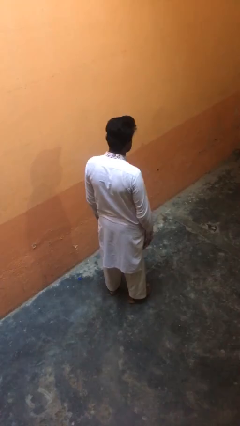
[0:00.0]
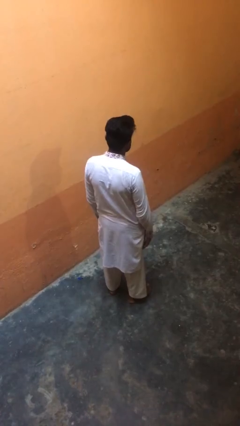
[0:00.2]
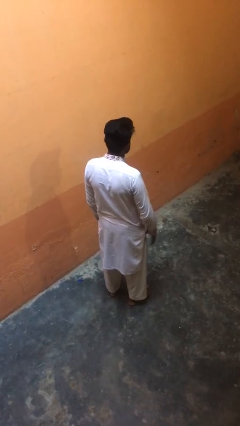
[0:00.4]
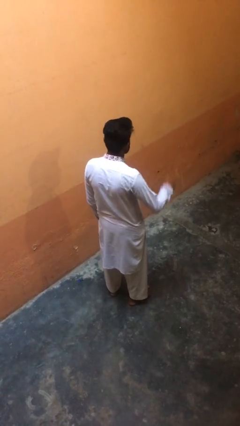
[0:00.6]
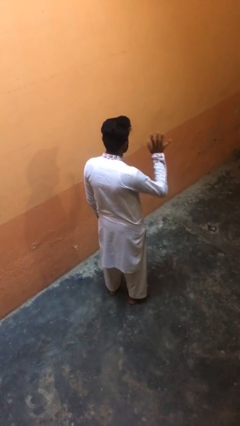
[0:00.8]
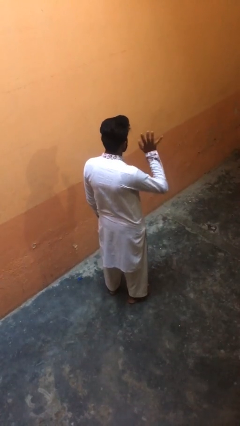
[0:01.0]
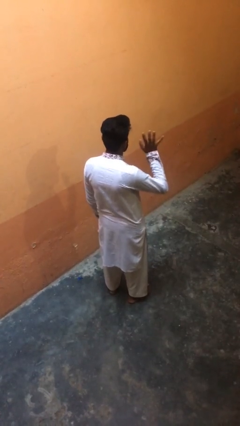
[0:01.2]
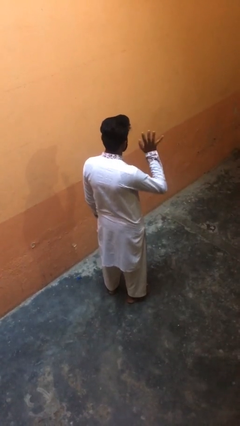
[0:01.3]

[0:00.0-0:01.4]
person gestures number five

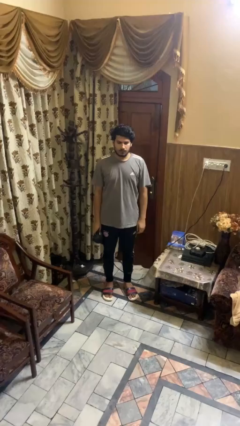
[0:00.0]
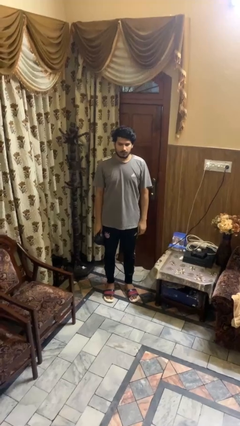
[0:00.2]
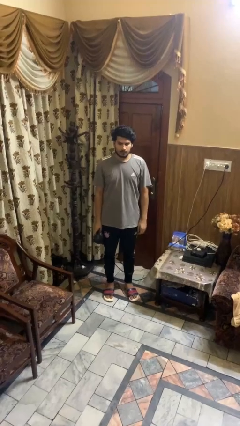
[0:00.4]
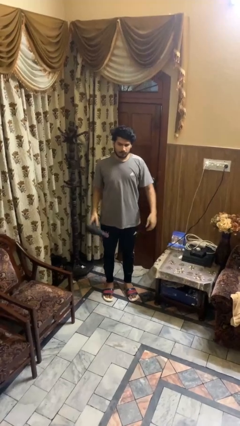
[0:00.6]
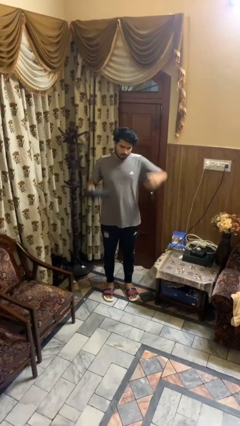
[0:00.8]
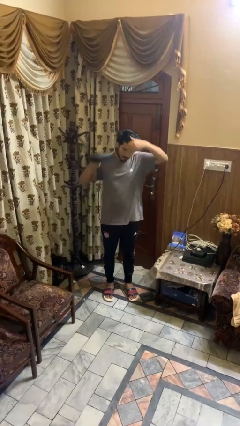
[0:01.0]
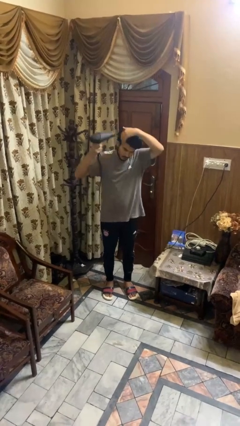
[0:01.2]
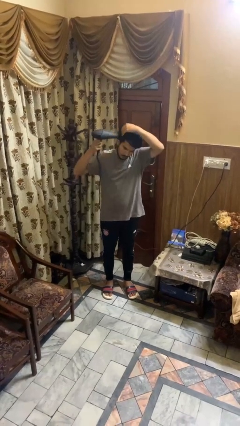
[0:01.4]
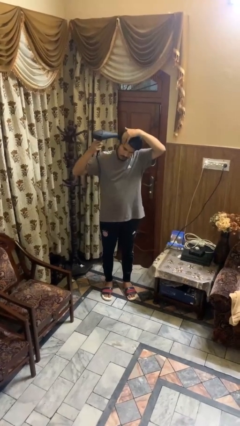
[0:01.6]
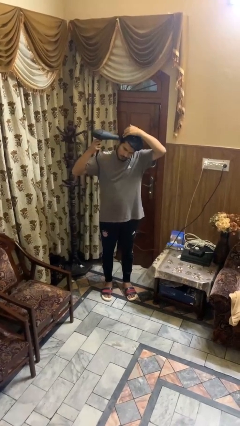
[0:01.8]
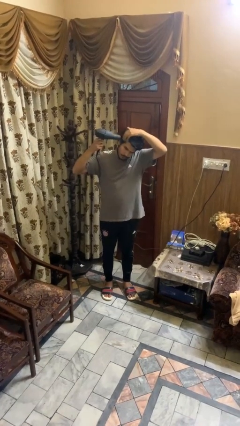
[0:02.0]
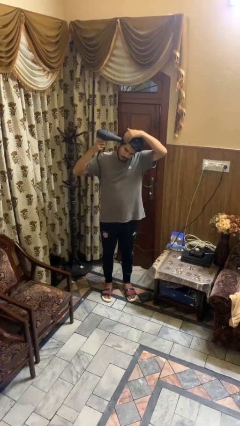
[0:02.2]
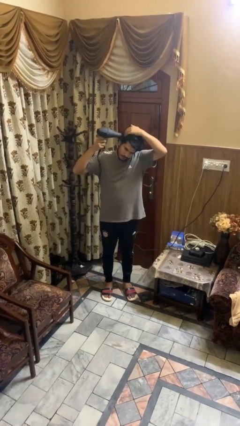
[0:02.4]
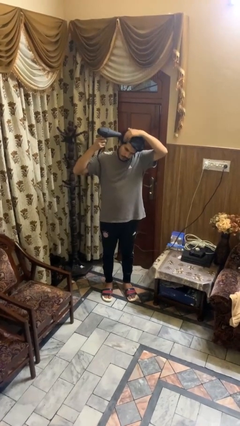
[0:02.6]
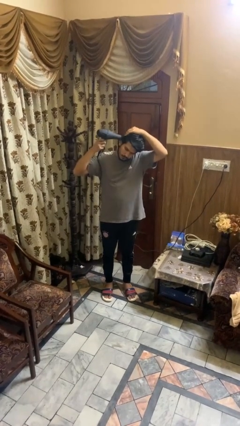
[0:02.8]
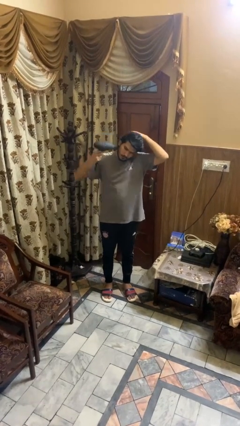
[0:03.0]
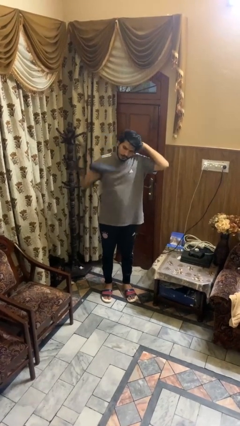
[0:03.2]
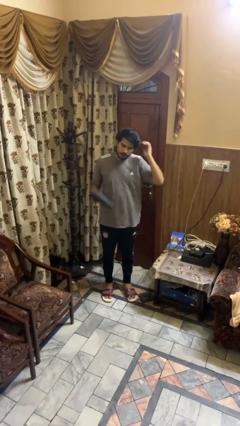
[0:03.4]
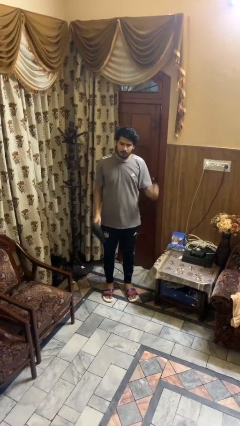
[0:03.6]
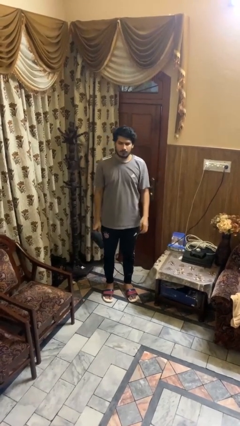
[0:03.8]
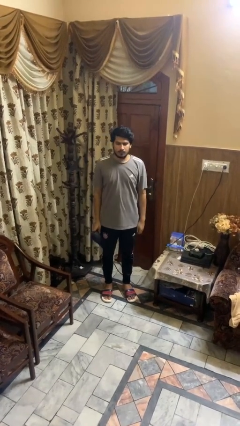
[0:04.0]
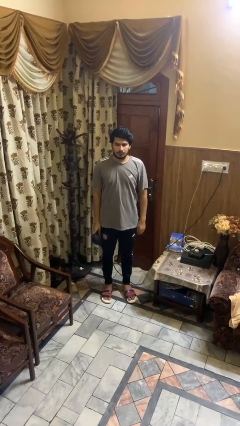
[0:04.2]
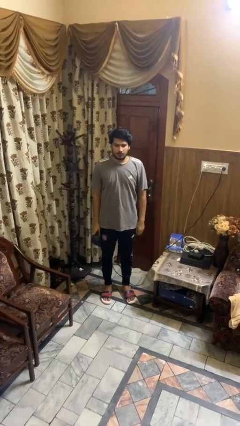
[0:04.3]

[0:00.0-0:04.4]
person dries hair with hairdryer

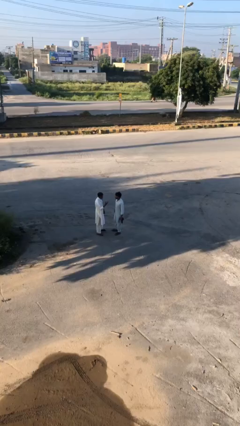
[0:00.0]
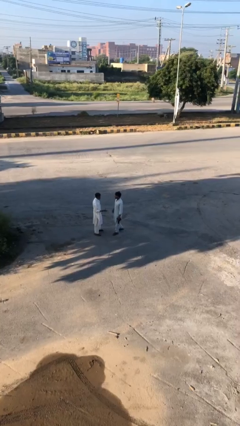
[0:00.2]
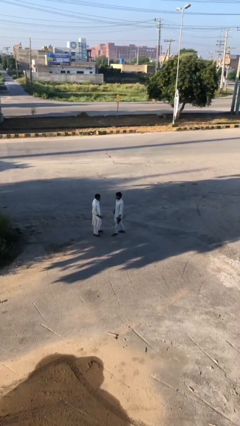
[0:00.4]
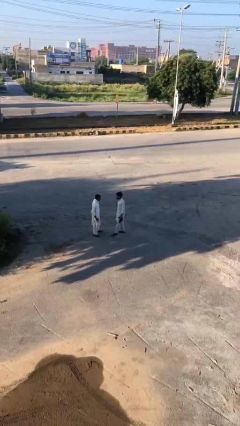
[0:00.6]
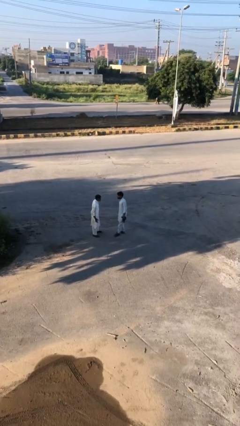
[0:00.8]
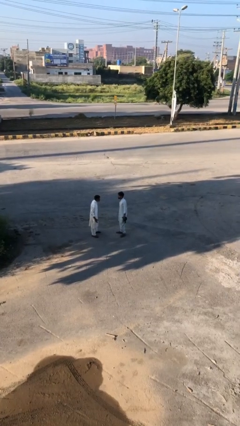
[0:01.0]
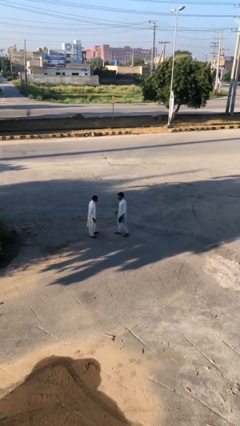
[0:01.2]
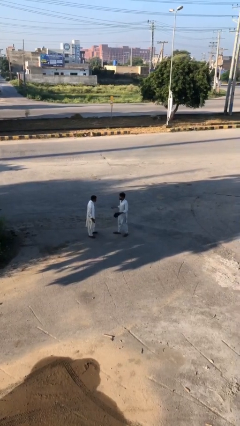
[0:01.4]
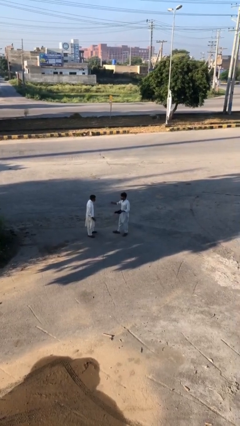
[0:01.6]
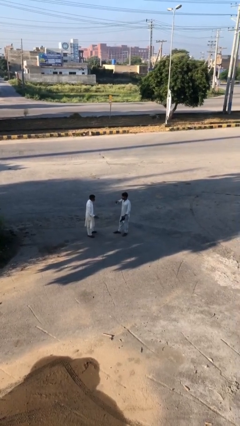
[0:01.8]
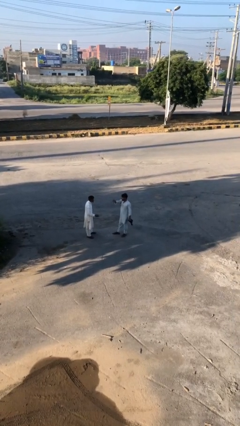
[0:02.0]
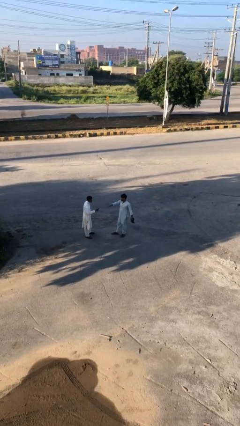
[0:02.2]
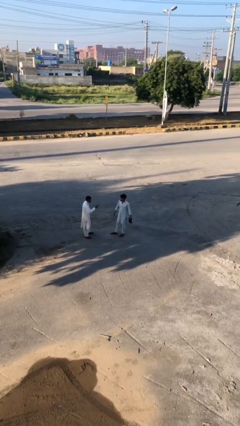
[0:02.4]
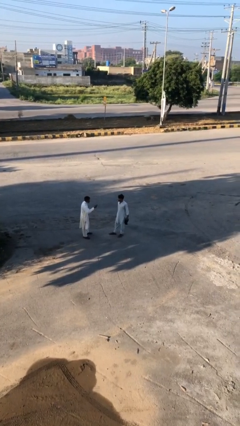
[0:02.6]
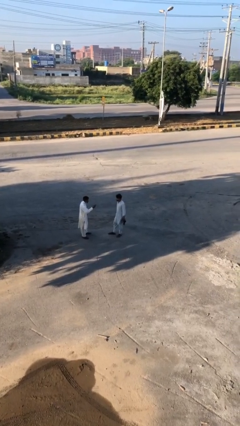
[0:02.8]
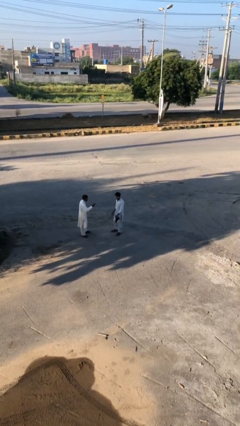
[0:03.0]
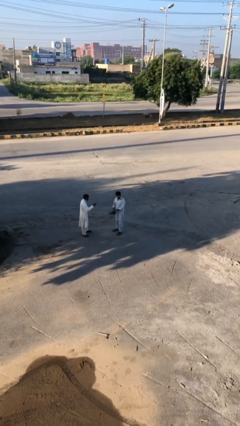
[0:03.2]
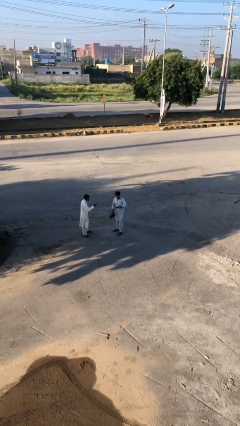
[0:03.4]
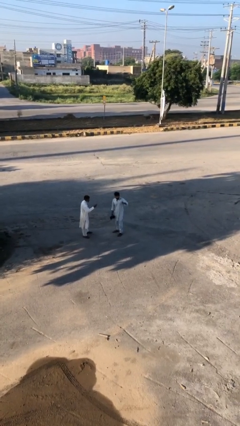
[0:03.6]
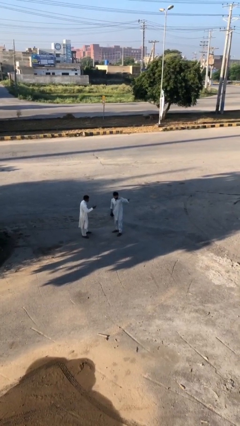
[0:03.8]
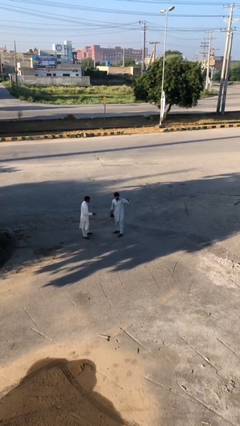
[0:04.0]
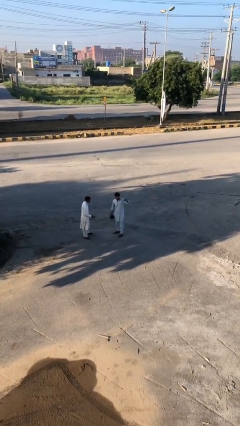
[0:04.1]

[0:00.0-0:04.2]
person talks to person

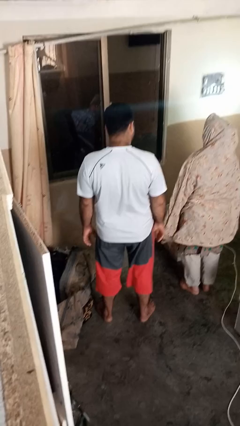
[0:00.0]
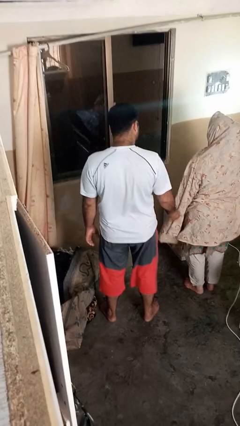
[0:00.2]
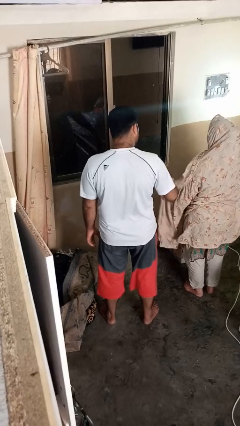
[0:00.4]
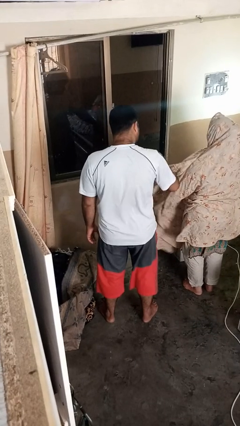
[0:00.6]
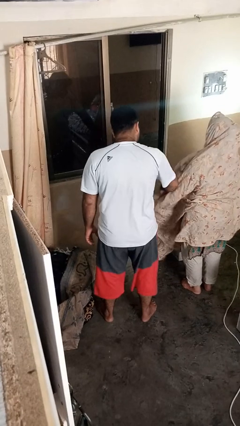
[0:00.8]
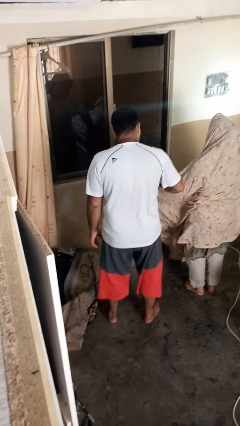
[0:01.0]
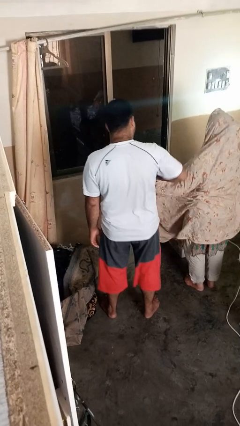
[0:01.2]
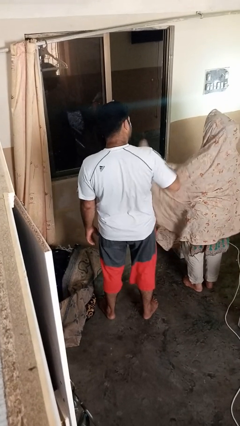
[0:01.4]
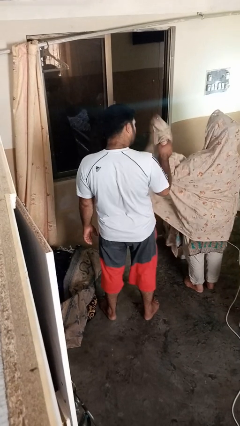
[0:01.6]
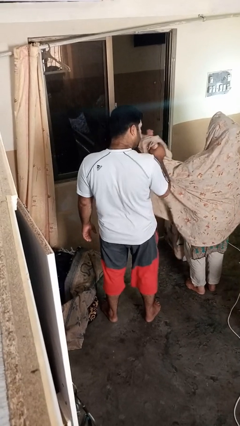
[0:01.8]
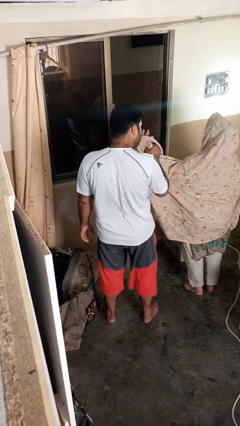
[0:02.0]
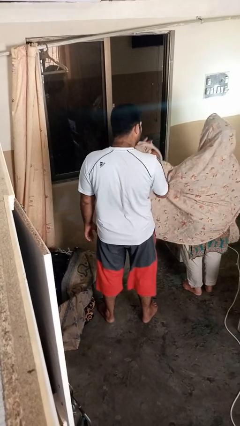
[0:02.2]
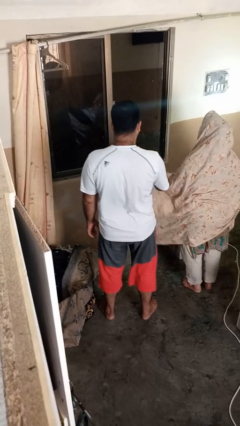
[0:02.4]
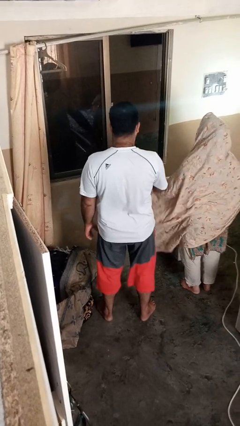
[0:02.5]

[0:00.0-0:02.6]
person grabs person by forearm

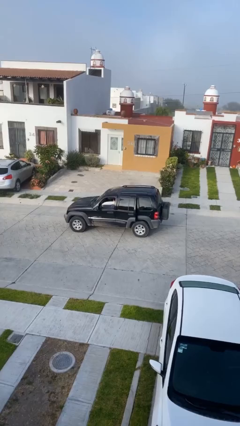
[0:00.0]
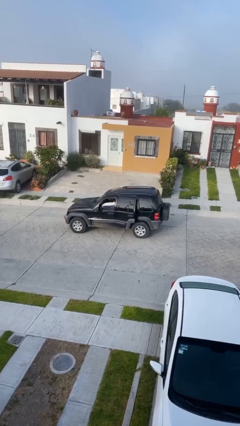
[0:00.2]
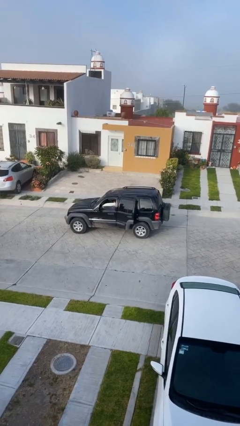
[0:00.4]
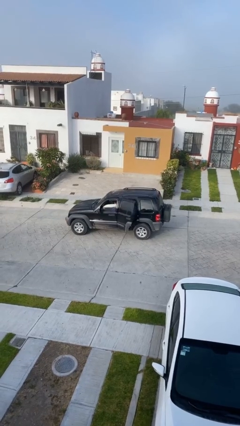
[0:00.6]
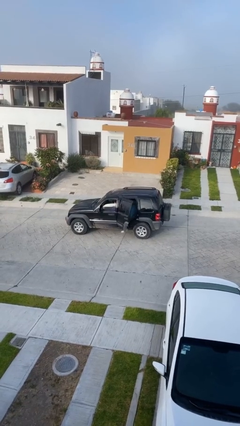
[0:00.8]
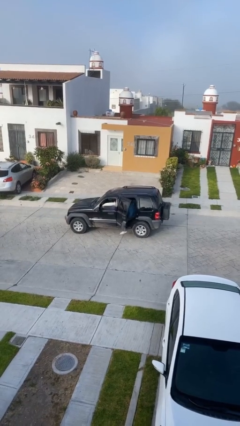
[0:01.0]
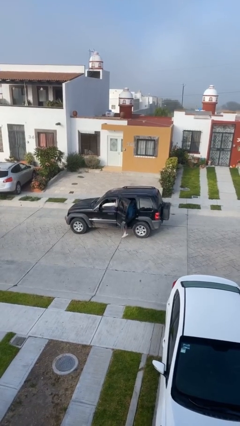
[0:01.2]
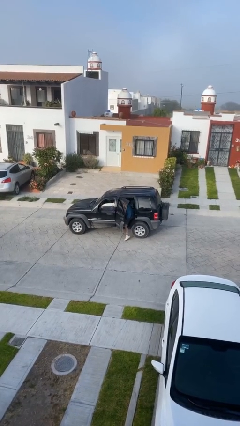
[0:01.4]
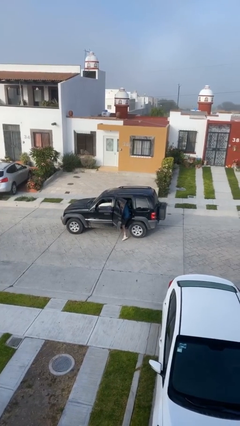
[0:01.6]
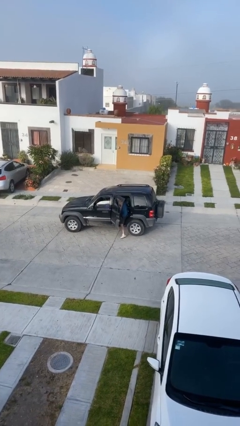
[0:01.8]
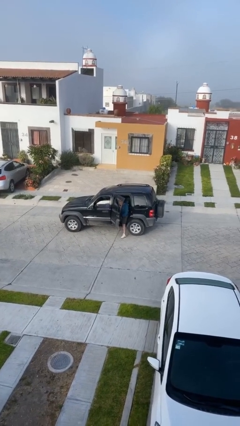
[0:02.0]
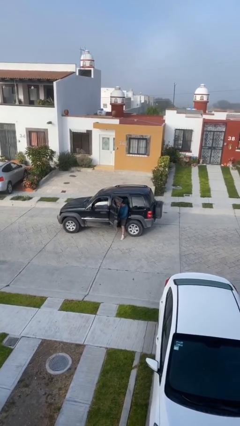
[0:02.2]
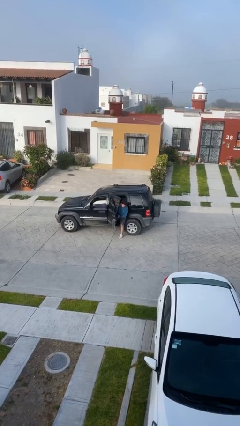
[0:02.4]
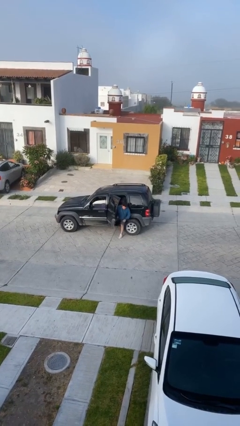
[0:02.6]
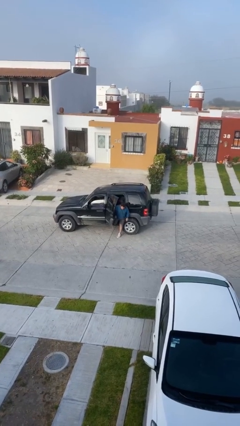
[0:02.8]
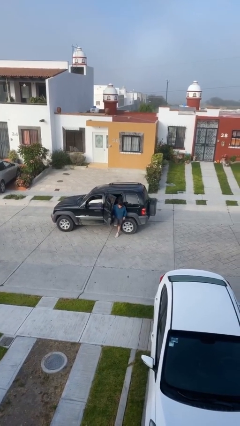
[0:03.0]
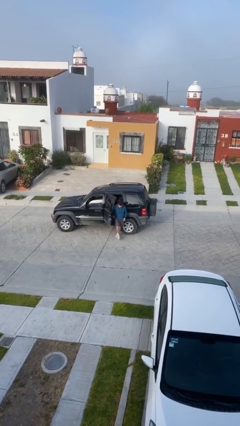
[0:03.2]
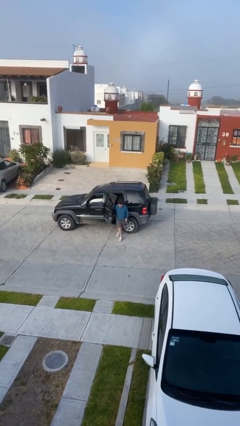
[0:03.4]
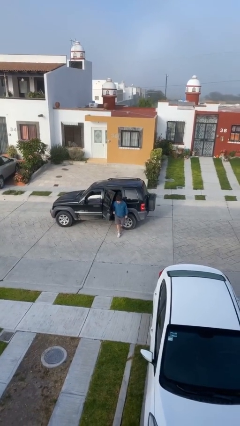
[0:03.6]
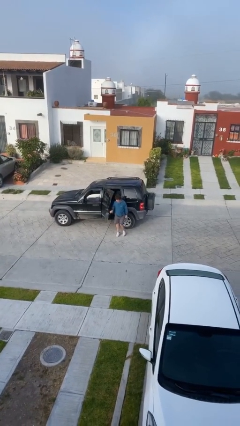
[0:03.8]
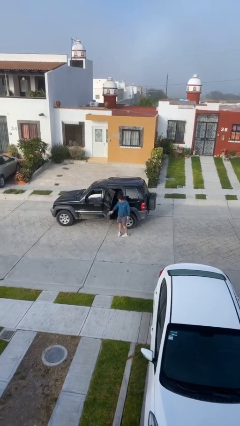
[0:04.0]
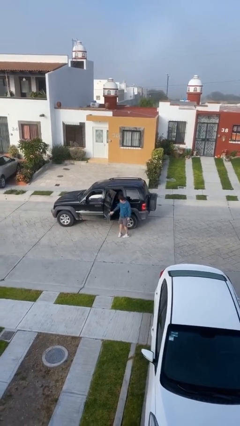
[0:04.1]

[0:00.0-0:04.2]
car drops off person

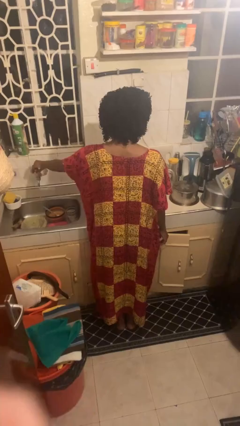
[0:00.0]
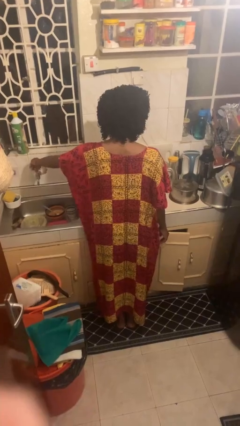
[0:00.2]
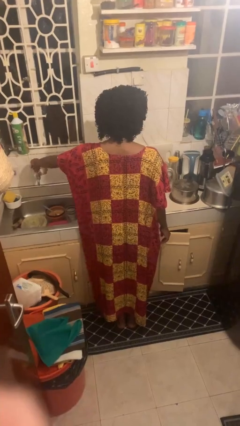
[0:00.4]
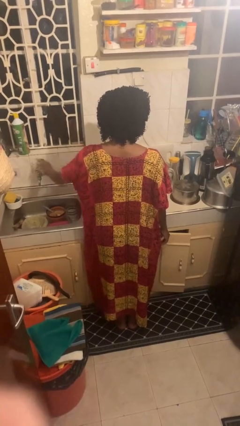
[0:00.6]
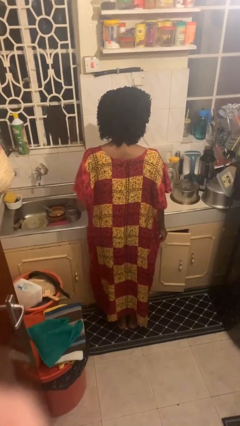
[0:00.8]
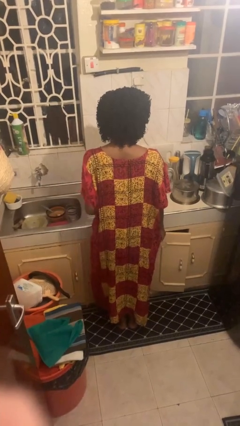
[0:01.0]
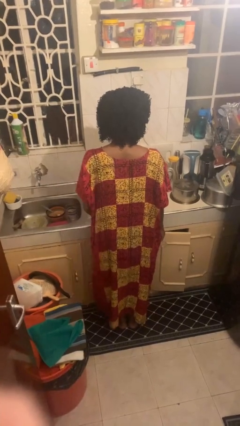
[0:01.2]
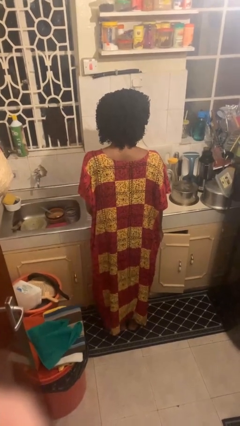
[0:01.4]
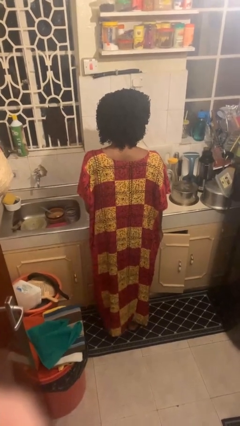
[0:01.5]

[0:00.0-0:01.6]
person turns off faucet
